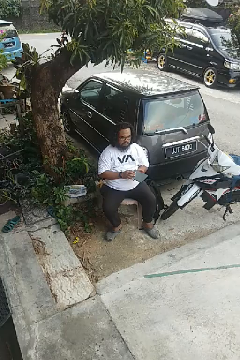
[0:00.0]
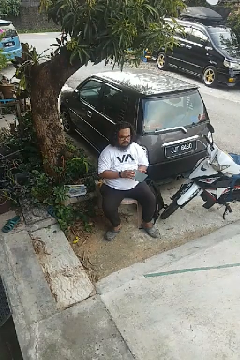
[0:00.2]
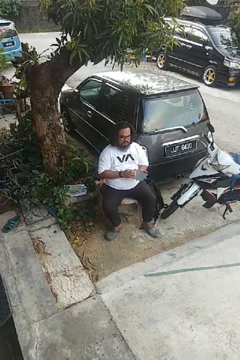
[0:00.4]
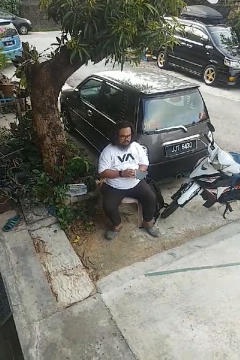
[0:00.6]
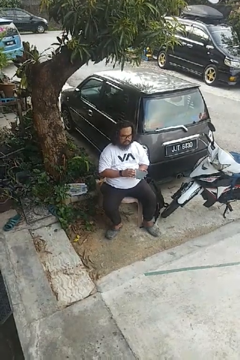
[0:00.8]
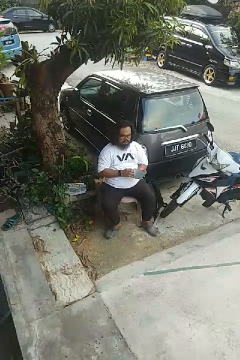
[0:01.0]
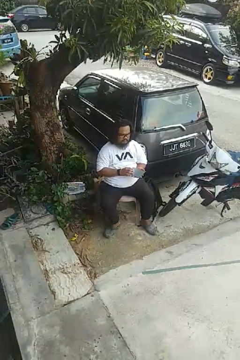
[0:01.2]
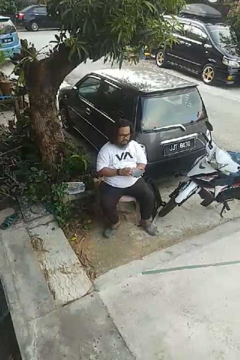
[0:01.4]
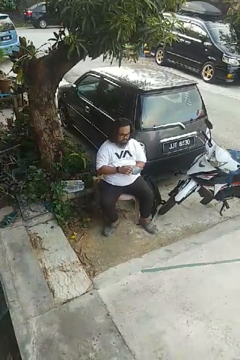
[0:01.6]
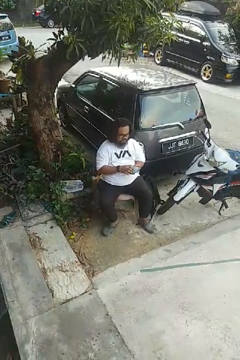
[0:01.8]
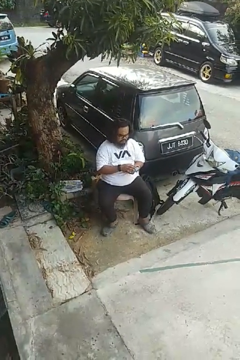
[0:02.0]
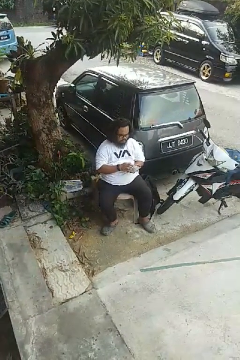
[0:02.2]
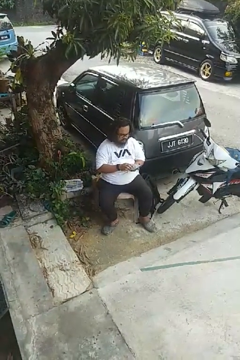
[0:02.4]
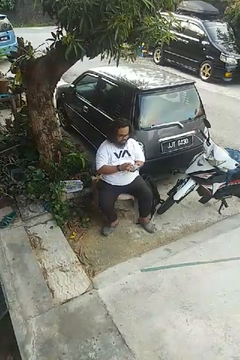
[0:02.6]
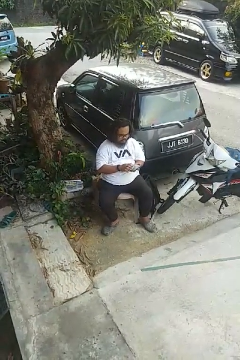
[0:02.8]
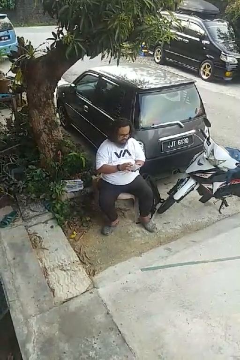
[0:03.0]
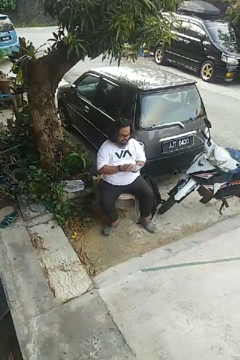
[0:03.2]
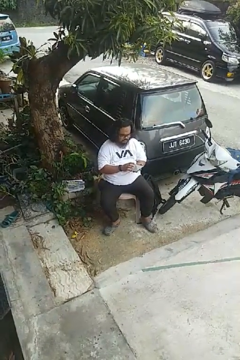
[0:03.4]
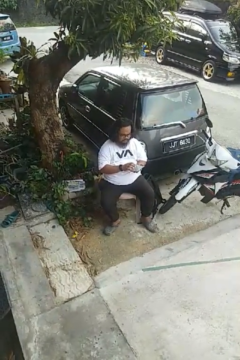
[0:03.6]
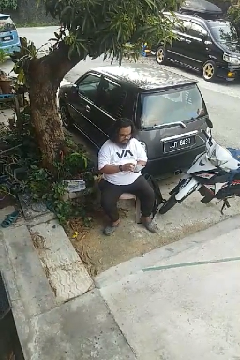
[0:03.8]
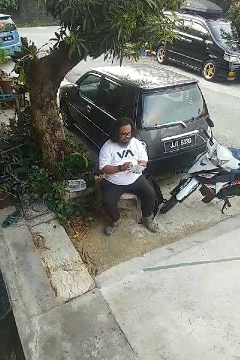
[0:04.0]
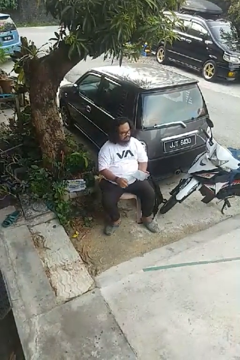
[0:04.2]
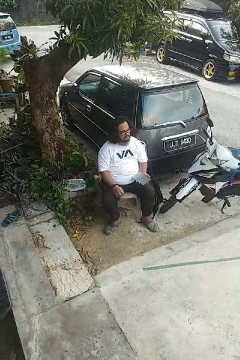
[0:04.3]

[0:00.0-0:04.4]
person interacts with tablet

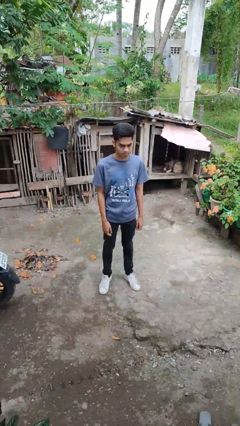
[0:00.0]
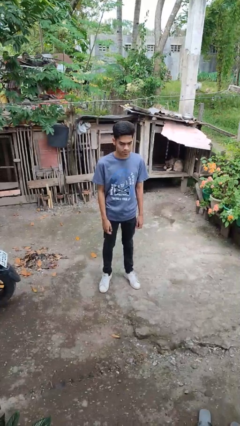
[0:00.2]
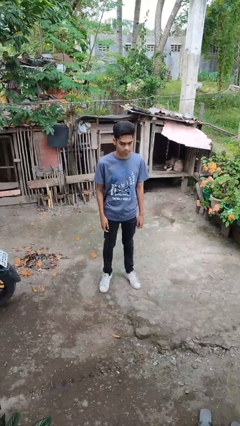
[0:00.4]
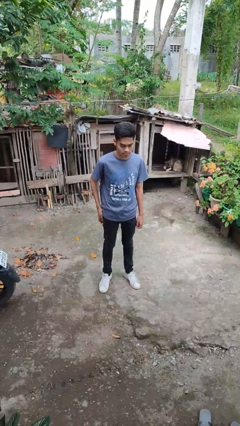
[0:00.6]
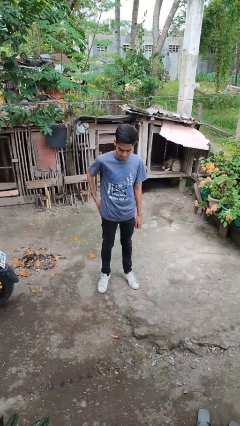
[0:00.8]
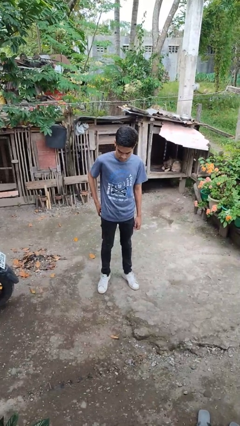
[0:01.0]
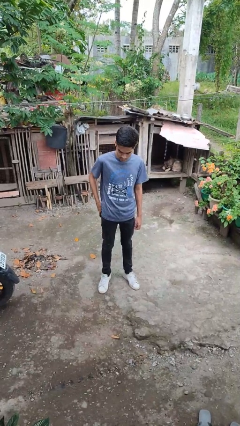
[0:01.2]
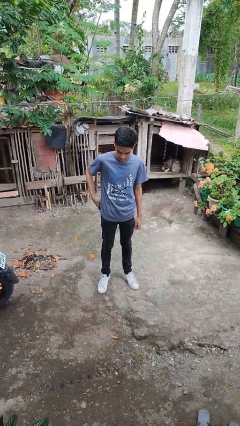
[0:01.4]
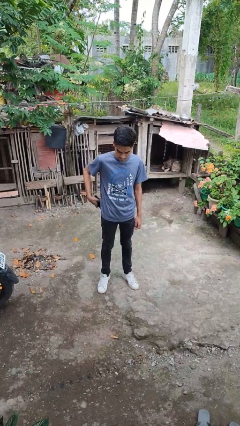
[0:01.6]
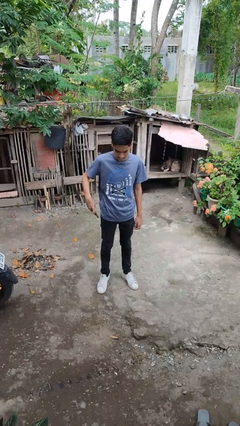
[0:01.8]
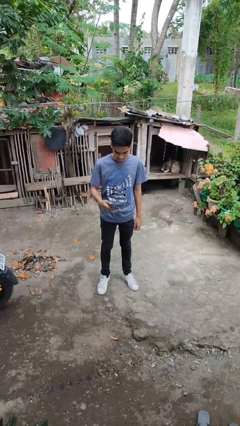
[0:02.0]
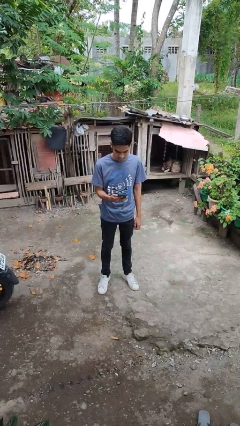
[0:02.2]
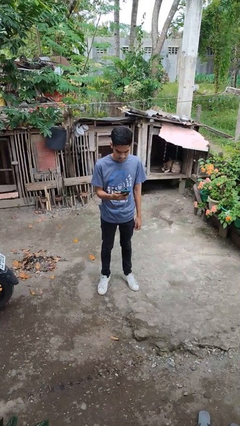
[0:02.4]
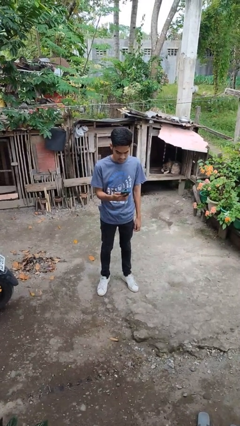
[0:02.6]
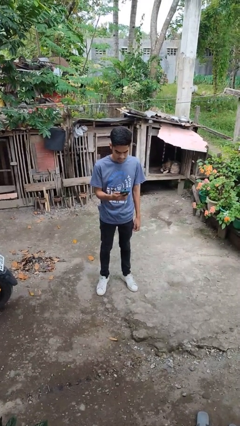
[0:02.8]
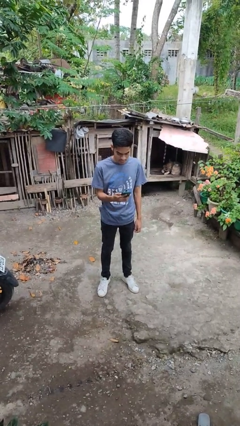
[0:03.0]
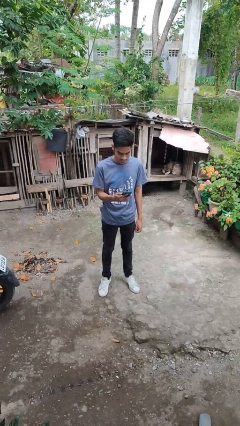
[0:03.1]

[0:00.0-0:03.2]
person takes phone from pocket

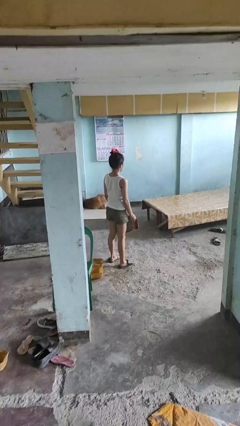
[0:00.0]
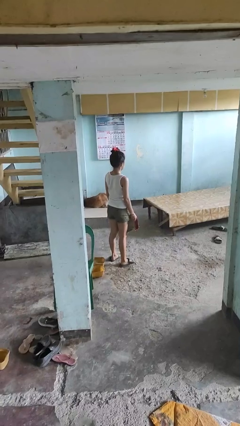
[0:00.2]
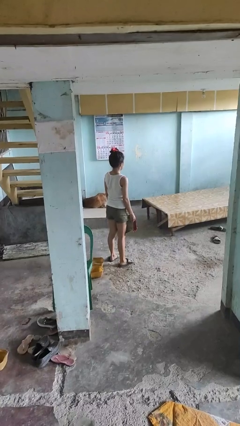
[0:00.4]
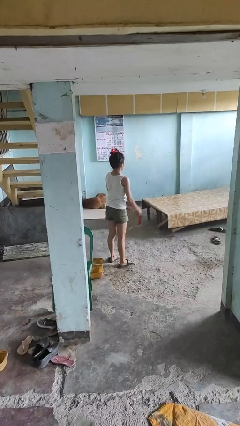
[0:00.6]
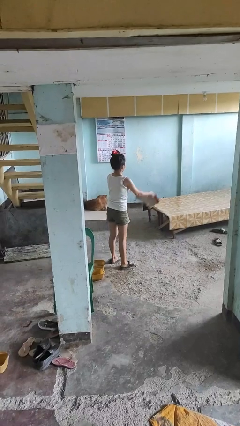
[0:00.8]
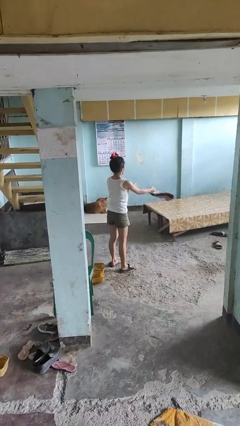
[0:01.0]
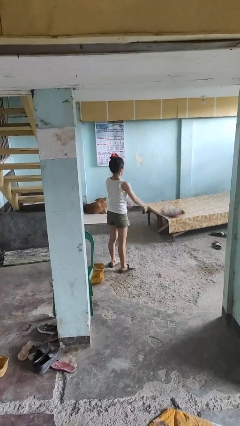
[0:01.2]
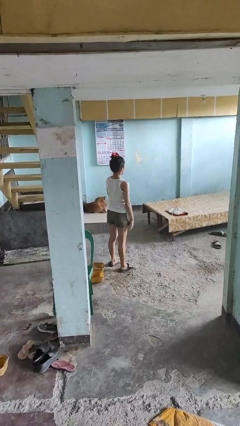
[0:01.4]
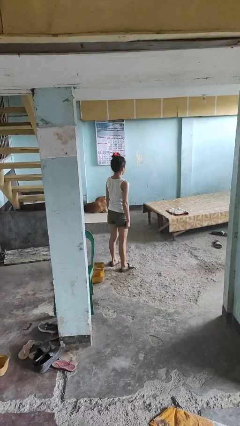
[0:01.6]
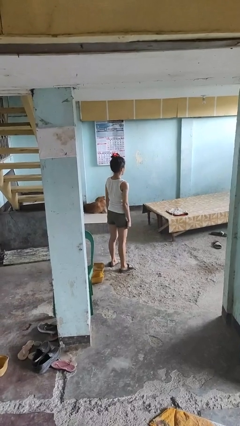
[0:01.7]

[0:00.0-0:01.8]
person throws object on table

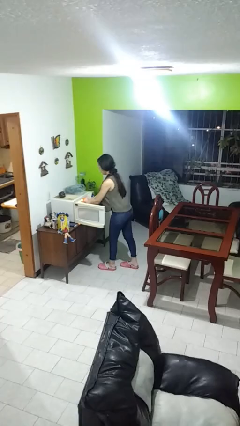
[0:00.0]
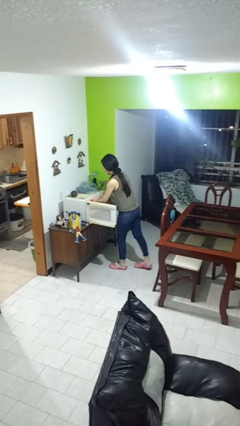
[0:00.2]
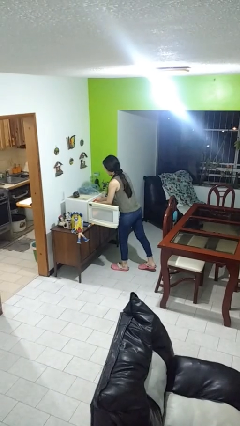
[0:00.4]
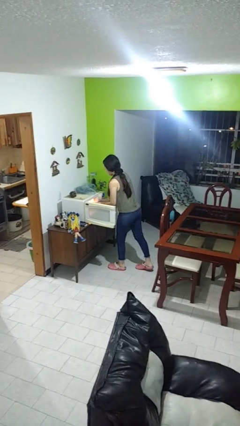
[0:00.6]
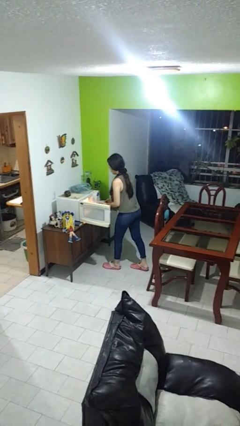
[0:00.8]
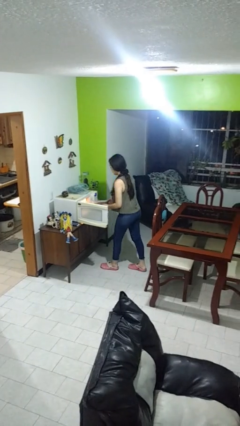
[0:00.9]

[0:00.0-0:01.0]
person takes object from microwave

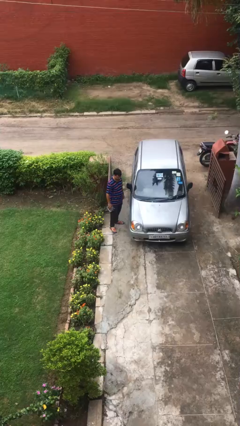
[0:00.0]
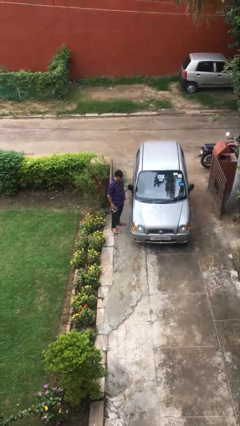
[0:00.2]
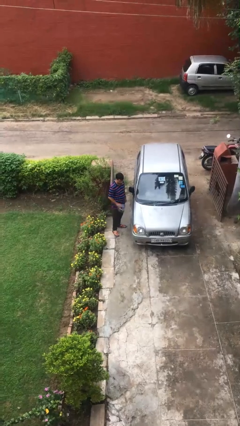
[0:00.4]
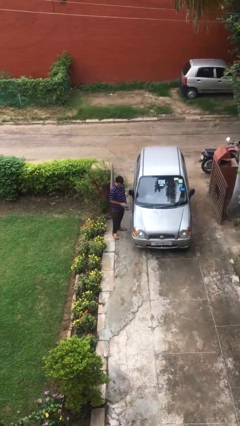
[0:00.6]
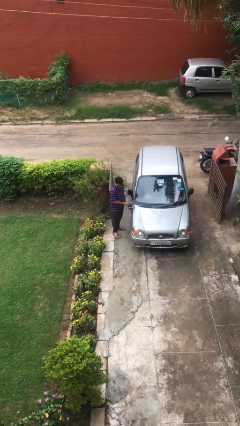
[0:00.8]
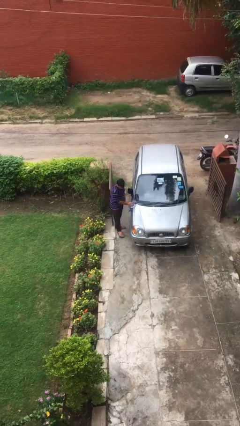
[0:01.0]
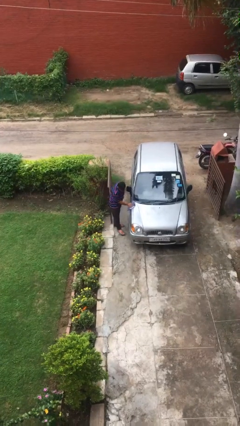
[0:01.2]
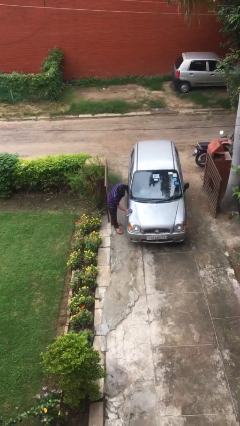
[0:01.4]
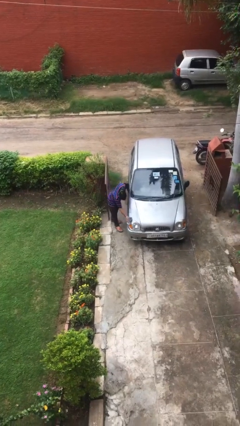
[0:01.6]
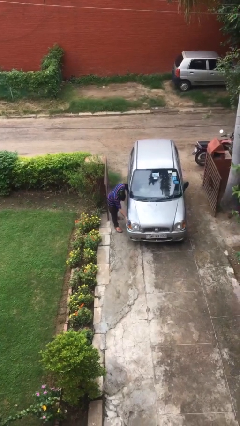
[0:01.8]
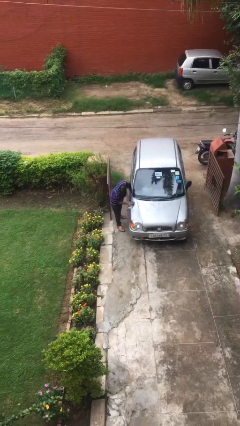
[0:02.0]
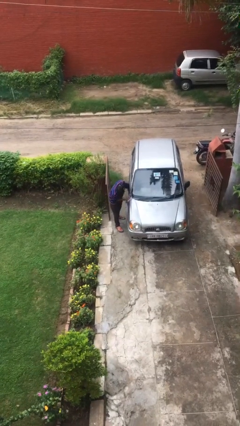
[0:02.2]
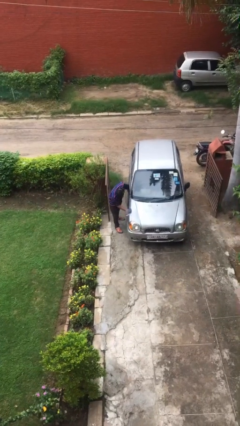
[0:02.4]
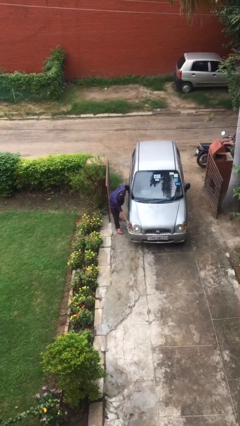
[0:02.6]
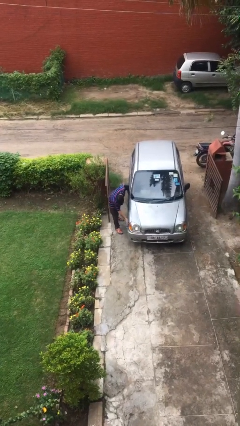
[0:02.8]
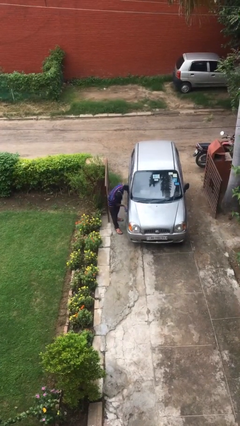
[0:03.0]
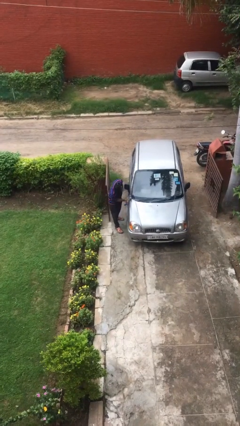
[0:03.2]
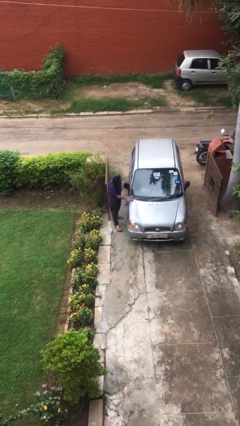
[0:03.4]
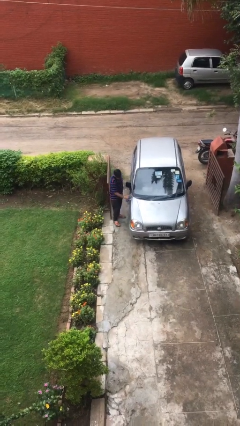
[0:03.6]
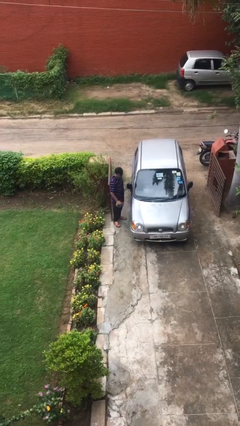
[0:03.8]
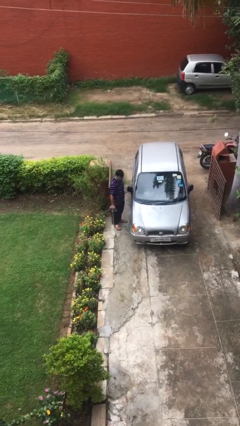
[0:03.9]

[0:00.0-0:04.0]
person polishes car with rag

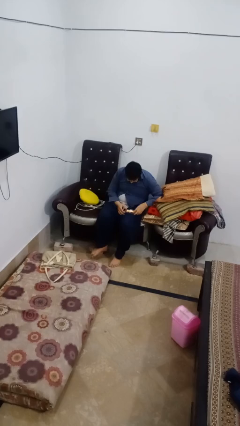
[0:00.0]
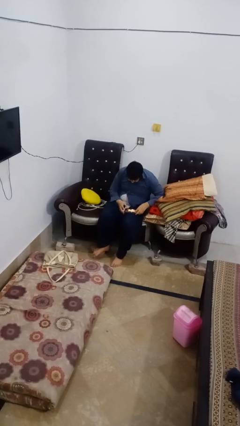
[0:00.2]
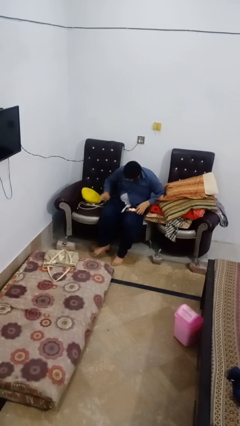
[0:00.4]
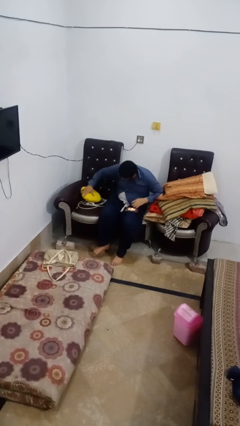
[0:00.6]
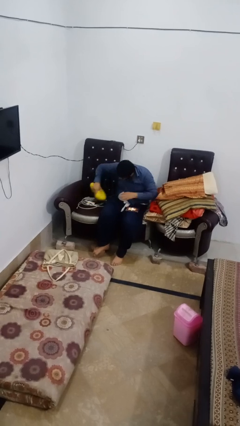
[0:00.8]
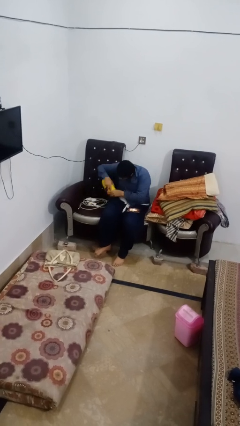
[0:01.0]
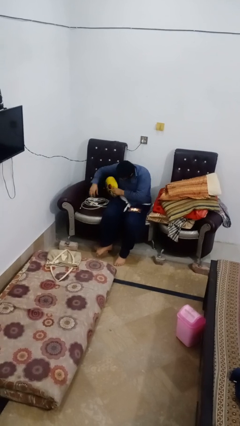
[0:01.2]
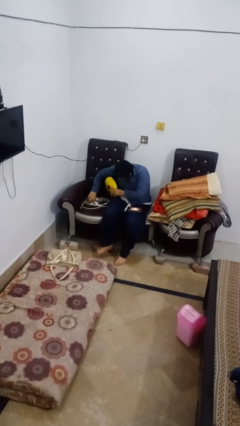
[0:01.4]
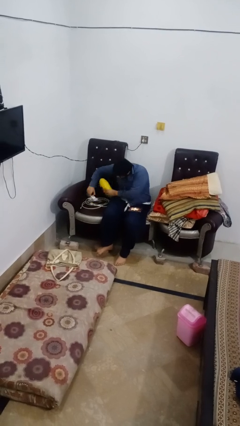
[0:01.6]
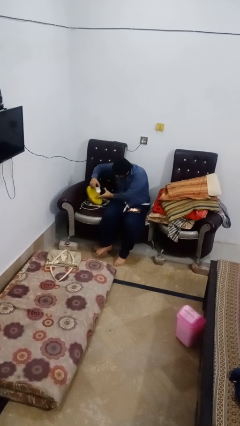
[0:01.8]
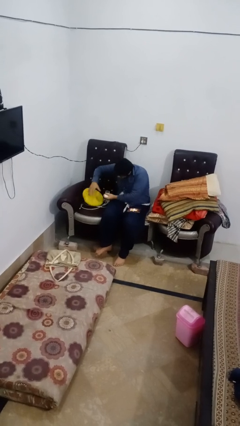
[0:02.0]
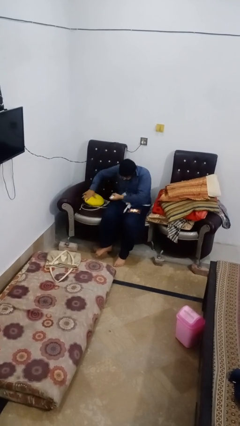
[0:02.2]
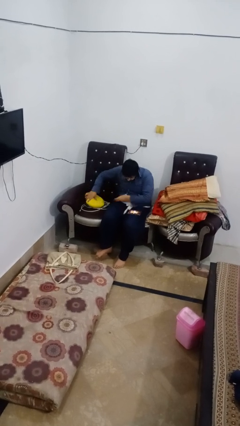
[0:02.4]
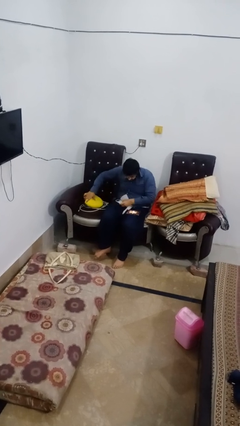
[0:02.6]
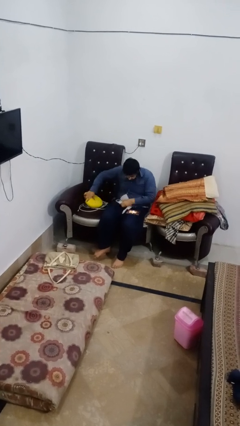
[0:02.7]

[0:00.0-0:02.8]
person searches in couch

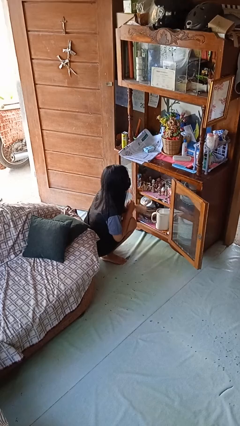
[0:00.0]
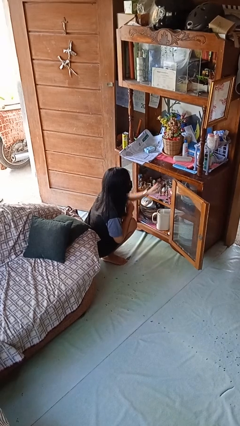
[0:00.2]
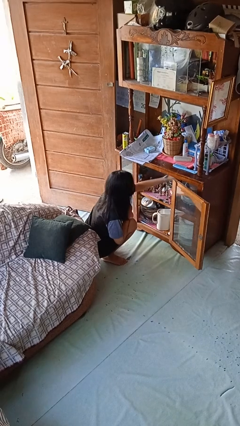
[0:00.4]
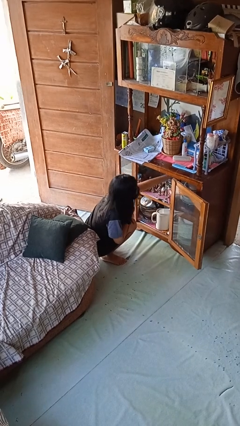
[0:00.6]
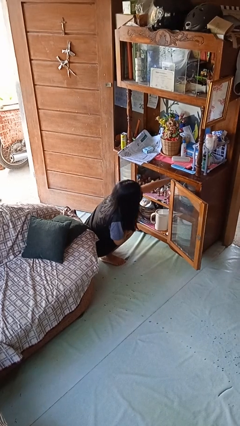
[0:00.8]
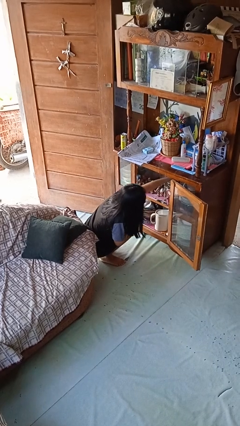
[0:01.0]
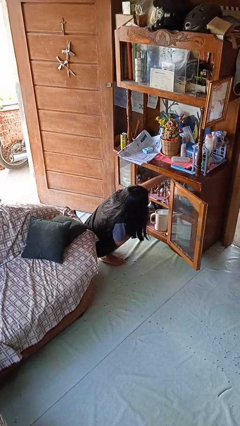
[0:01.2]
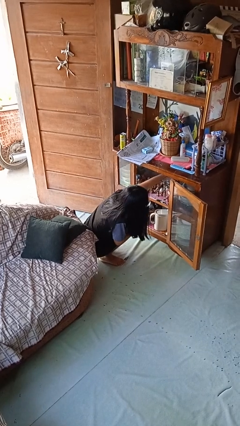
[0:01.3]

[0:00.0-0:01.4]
person searches in cabinet
